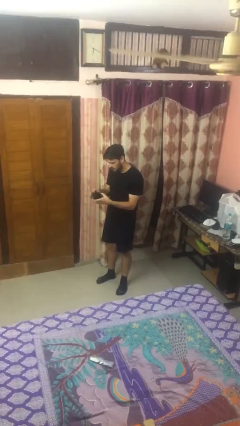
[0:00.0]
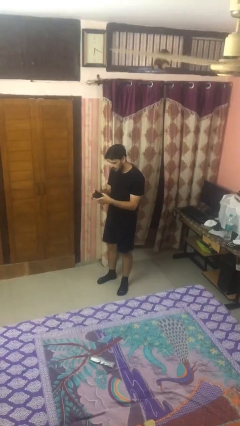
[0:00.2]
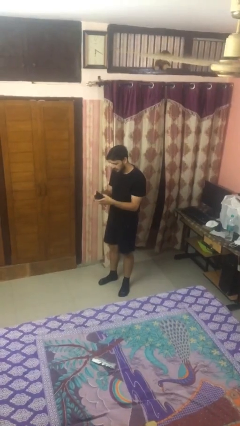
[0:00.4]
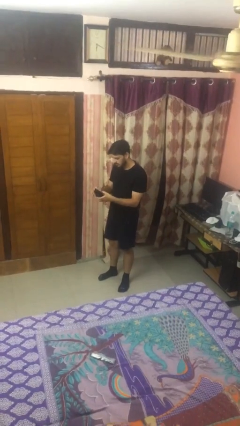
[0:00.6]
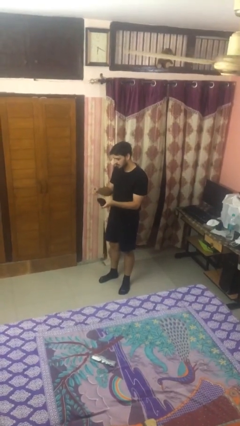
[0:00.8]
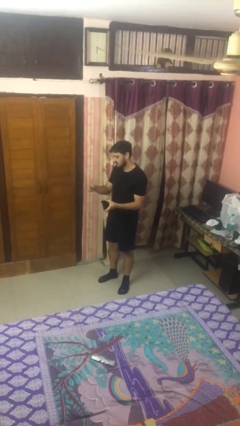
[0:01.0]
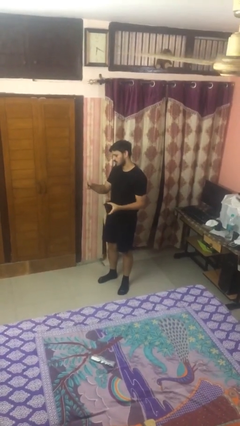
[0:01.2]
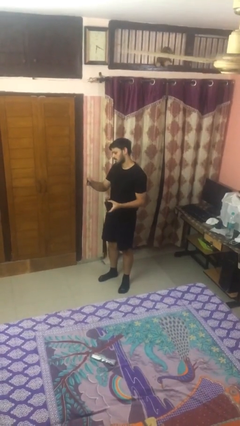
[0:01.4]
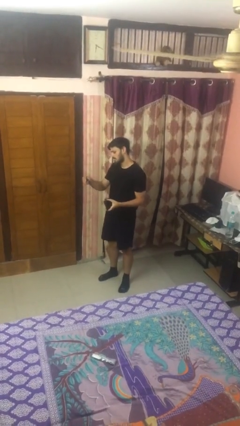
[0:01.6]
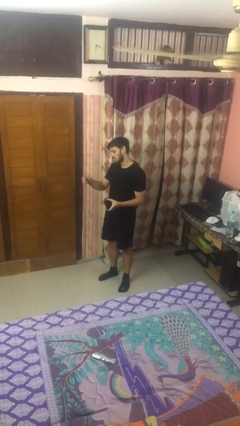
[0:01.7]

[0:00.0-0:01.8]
person takes object from purse

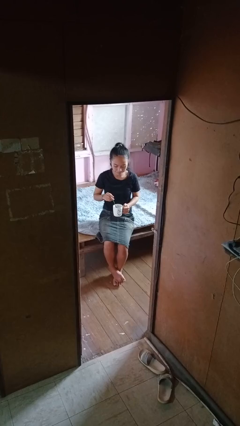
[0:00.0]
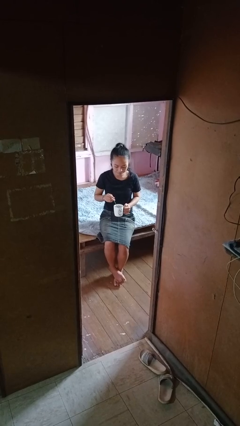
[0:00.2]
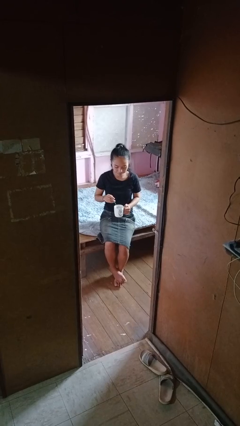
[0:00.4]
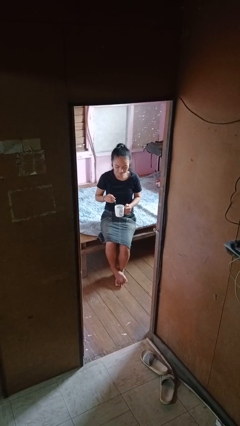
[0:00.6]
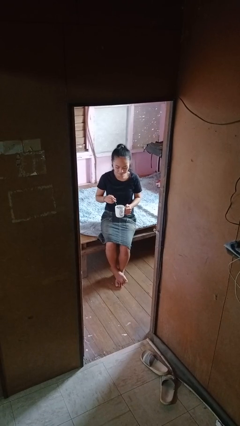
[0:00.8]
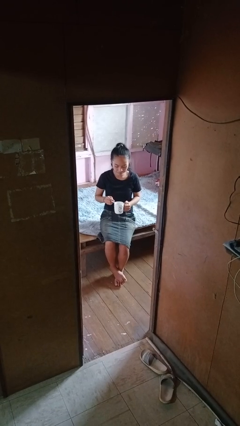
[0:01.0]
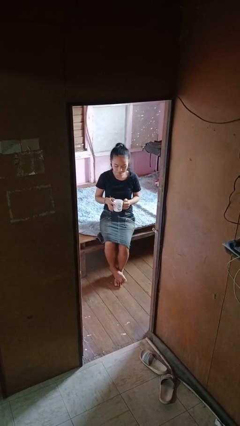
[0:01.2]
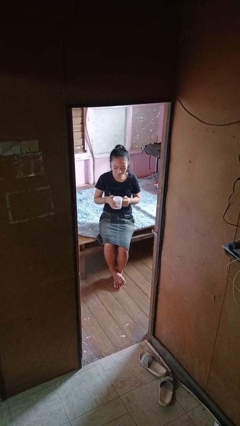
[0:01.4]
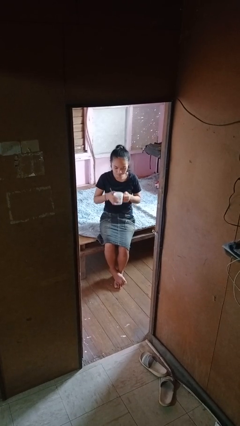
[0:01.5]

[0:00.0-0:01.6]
person stirs mug

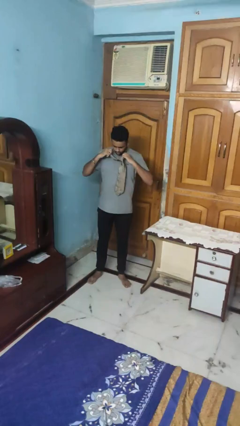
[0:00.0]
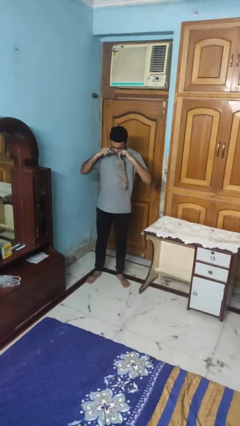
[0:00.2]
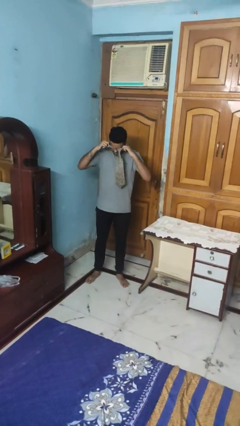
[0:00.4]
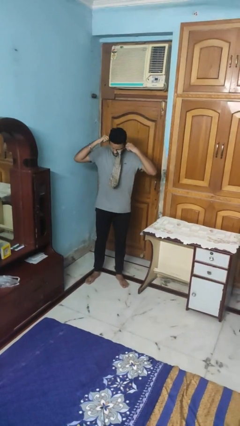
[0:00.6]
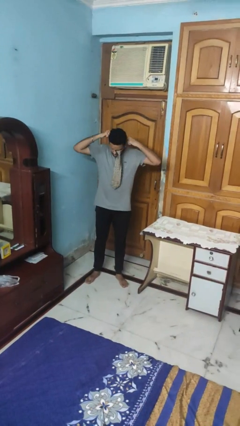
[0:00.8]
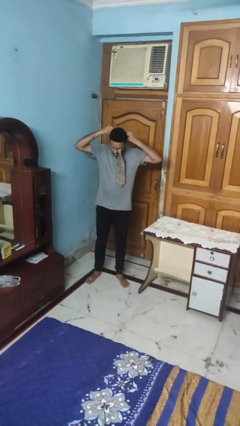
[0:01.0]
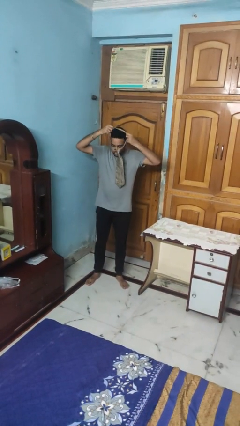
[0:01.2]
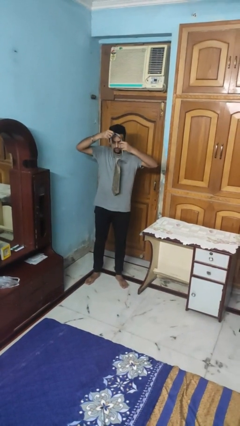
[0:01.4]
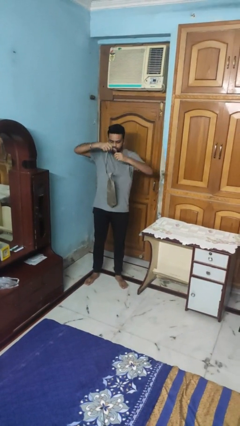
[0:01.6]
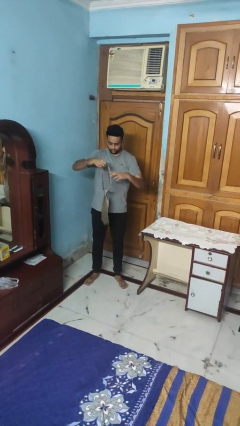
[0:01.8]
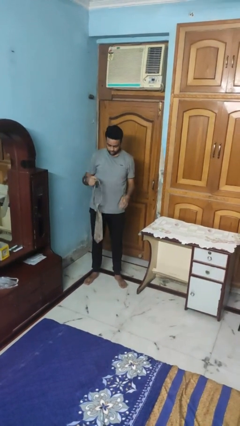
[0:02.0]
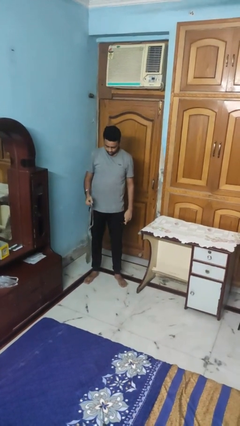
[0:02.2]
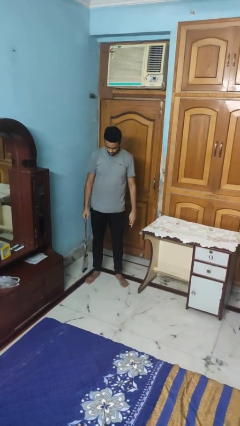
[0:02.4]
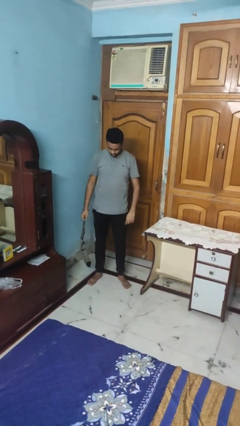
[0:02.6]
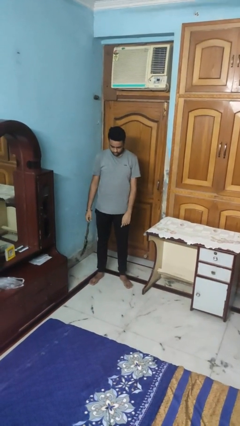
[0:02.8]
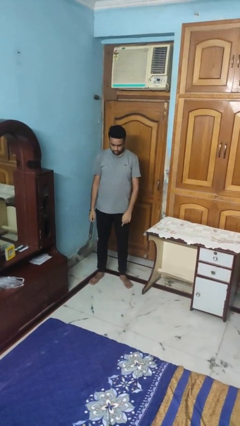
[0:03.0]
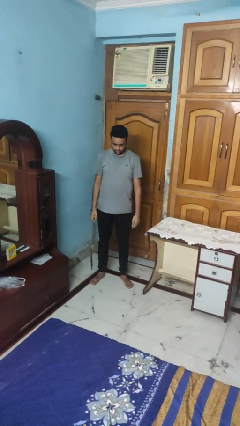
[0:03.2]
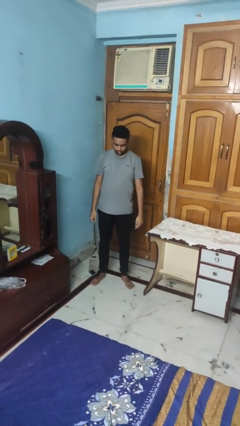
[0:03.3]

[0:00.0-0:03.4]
person takes off necktie

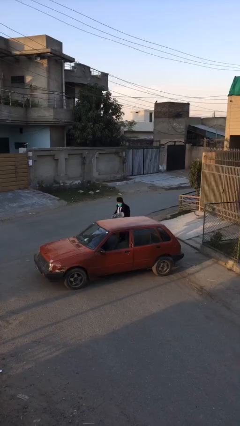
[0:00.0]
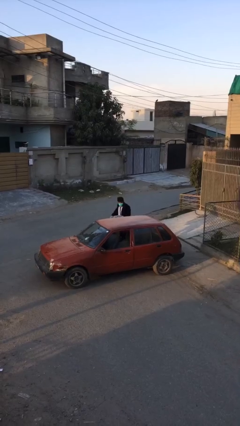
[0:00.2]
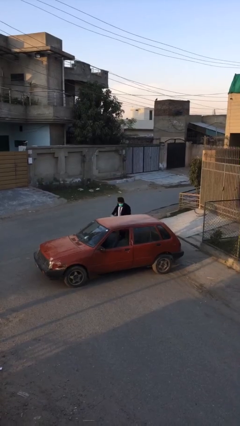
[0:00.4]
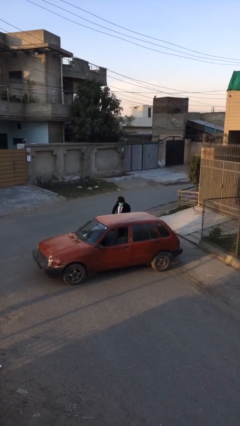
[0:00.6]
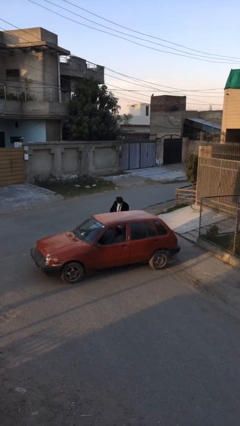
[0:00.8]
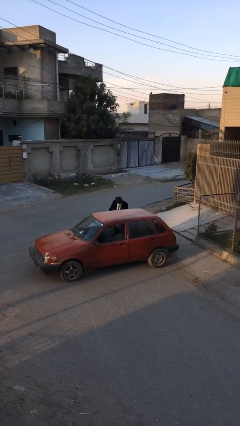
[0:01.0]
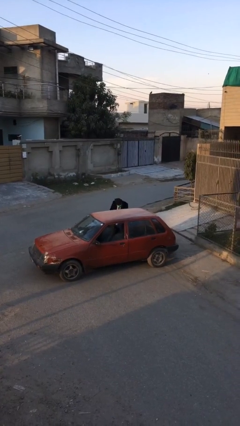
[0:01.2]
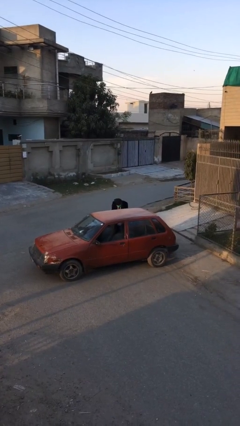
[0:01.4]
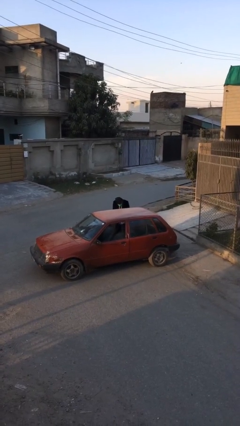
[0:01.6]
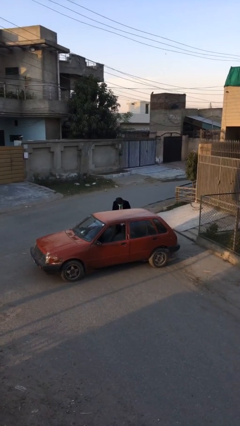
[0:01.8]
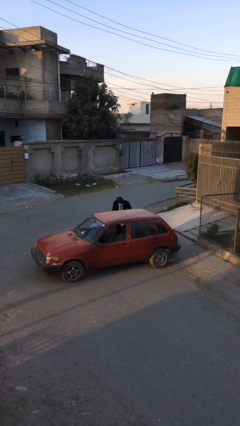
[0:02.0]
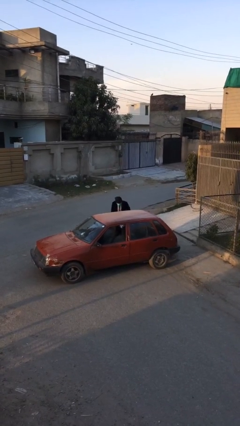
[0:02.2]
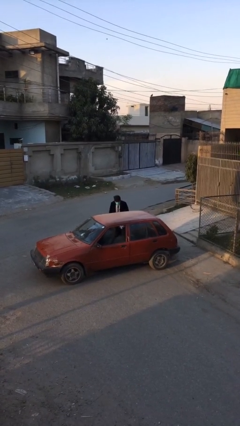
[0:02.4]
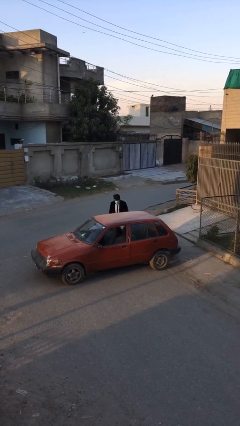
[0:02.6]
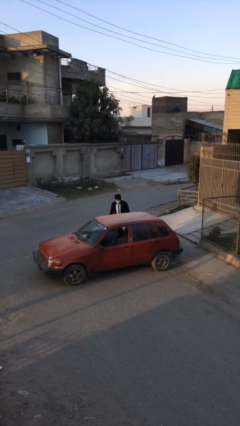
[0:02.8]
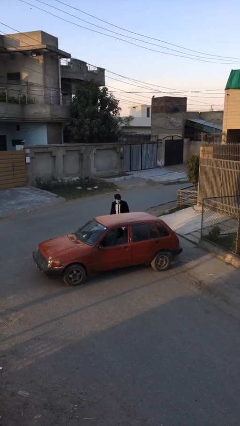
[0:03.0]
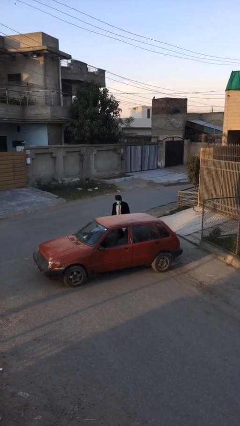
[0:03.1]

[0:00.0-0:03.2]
person loads car

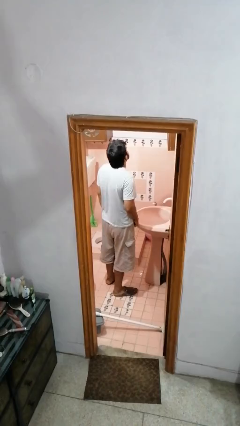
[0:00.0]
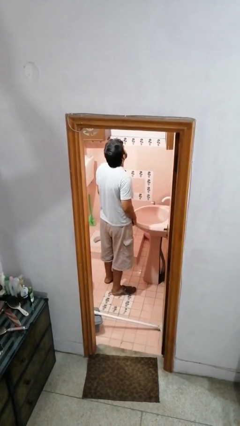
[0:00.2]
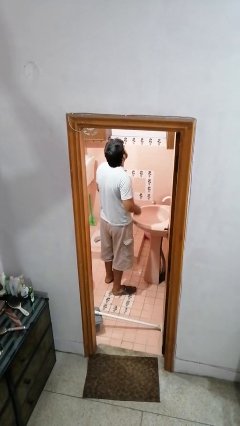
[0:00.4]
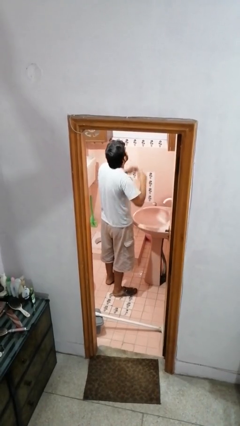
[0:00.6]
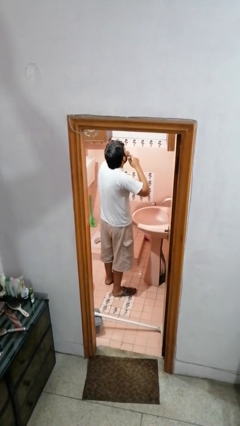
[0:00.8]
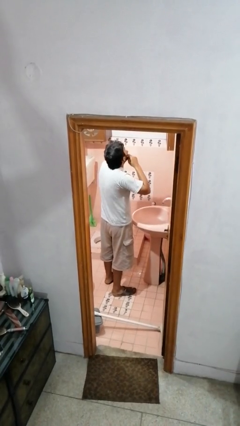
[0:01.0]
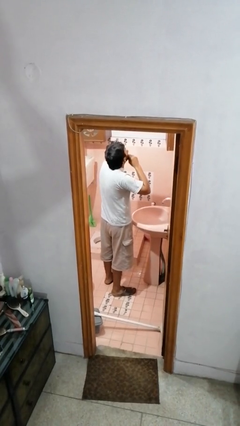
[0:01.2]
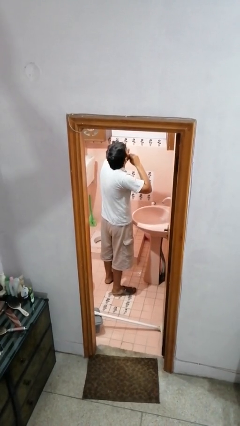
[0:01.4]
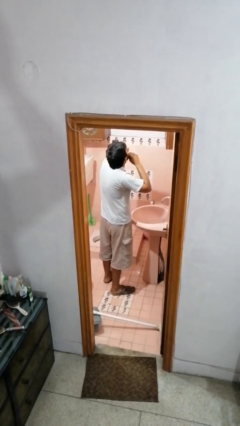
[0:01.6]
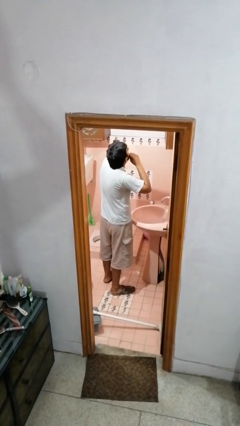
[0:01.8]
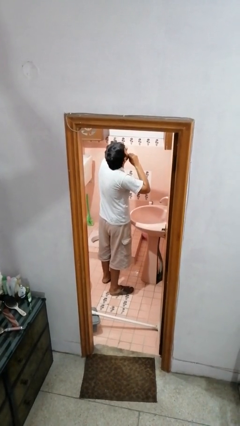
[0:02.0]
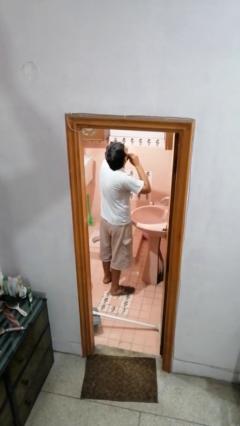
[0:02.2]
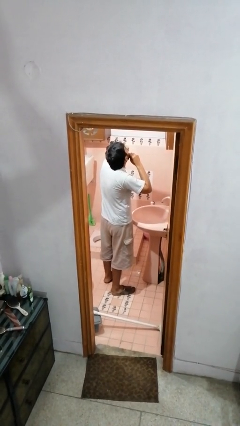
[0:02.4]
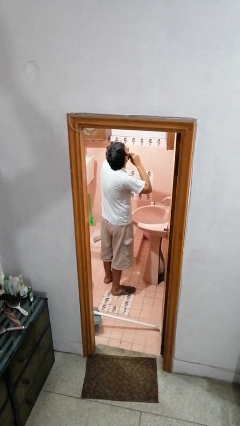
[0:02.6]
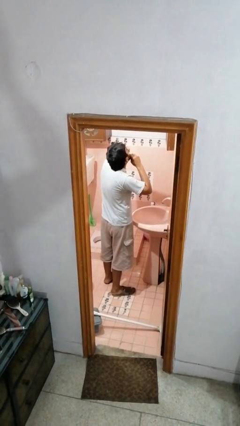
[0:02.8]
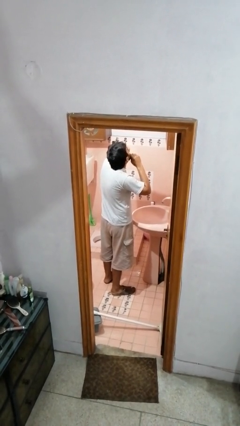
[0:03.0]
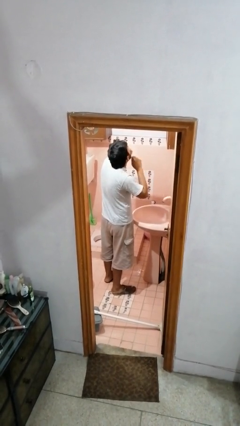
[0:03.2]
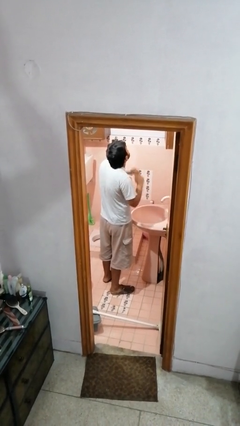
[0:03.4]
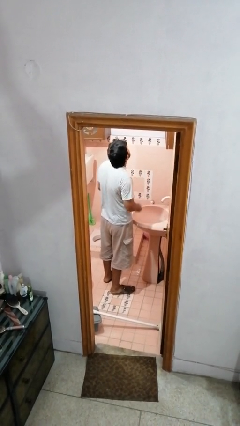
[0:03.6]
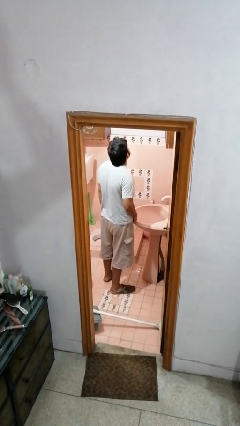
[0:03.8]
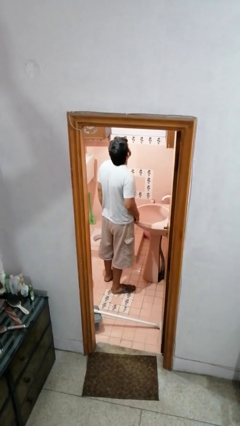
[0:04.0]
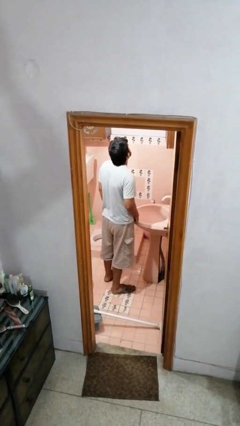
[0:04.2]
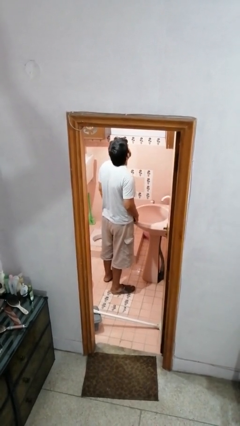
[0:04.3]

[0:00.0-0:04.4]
person flosses

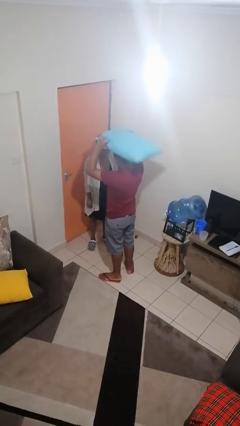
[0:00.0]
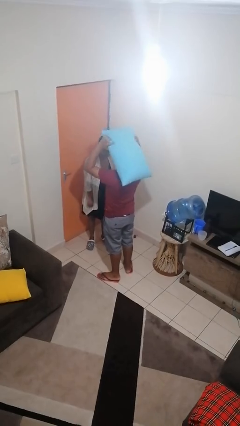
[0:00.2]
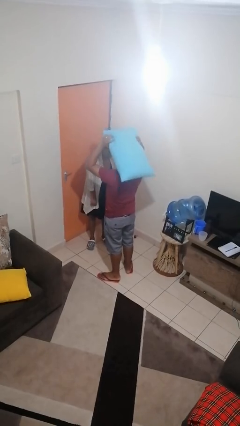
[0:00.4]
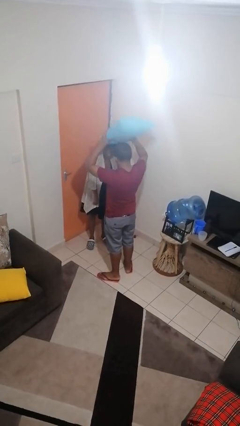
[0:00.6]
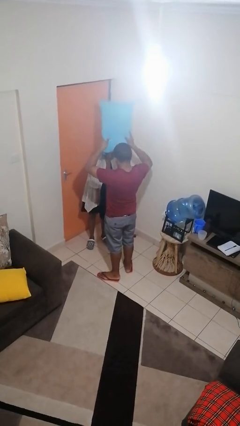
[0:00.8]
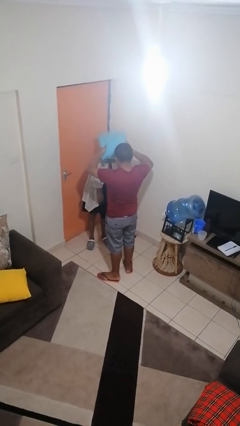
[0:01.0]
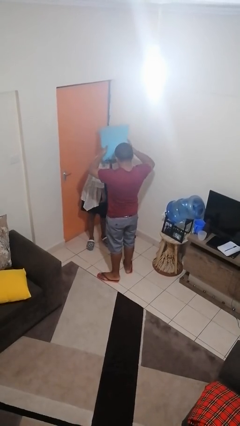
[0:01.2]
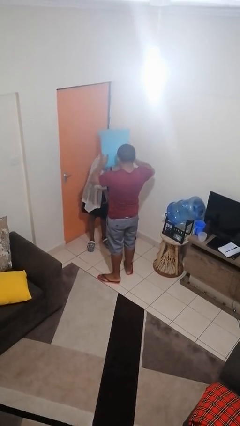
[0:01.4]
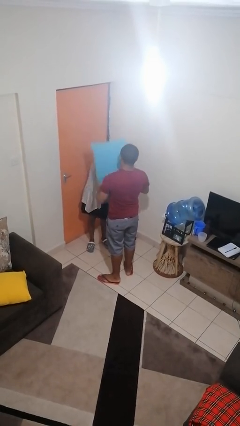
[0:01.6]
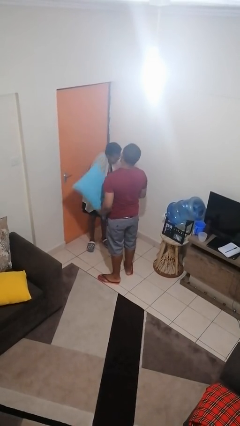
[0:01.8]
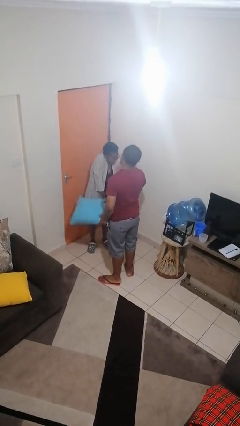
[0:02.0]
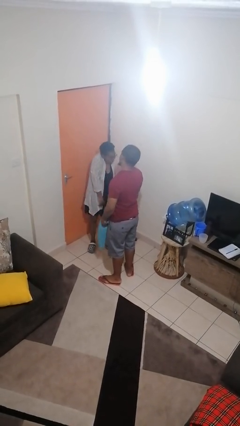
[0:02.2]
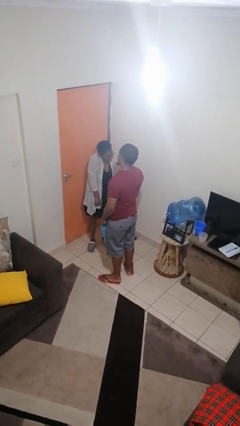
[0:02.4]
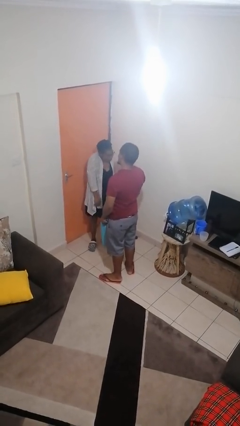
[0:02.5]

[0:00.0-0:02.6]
person hits person with pillow

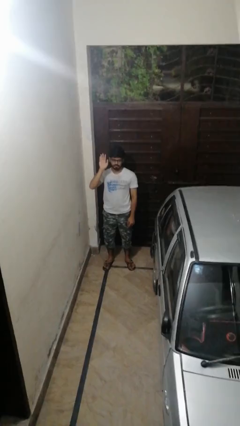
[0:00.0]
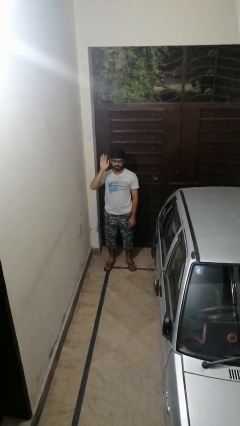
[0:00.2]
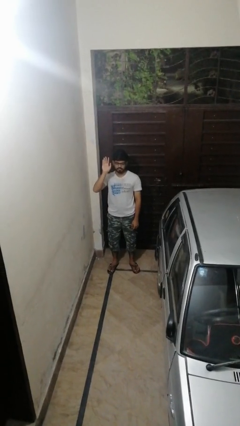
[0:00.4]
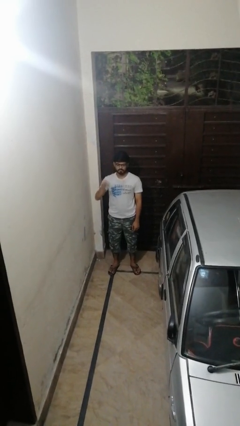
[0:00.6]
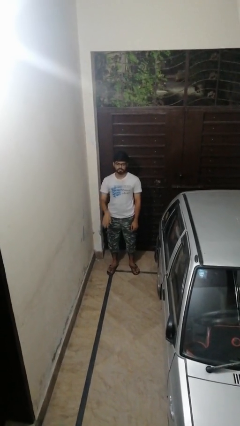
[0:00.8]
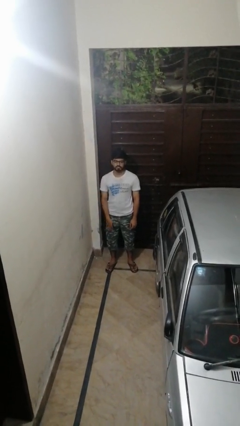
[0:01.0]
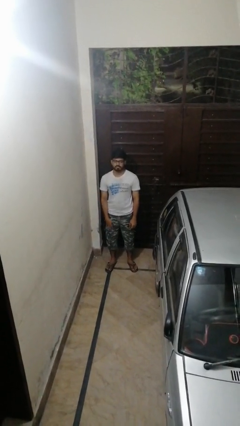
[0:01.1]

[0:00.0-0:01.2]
person gestures lower hand
